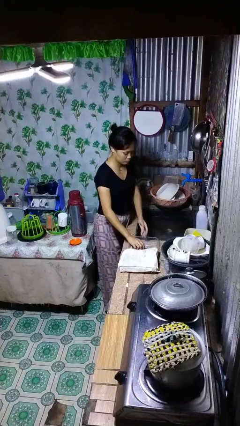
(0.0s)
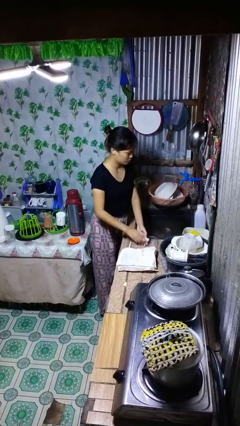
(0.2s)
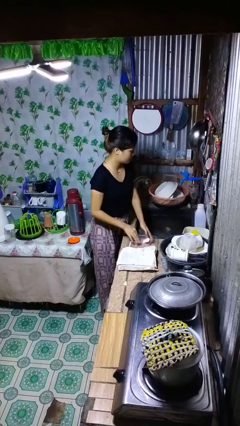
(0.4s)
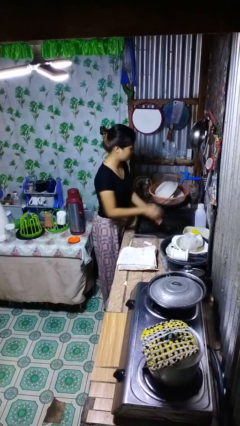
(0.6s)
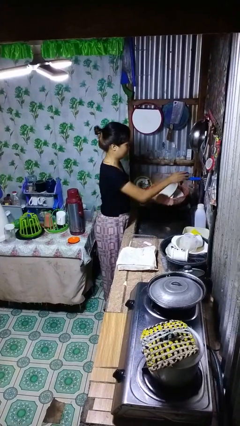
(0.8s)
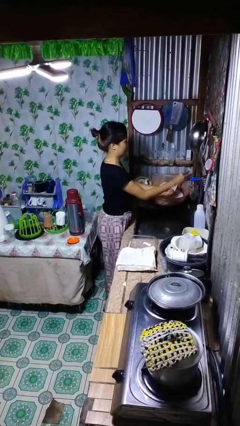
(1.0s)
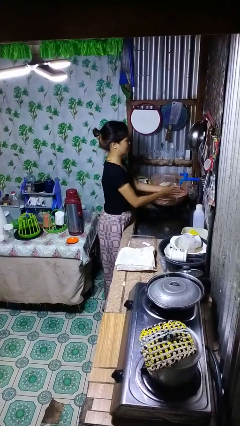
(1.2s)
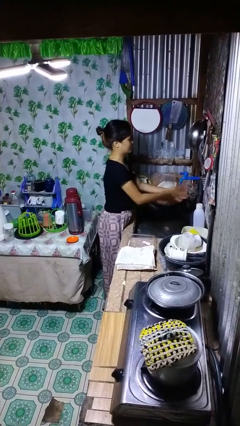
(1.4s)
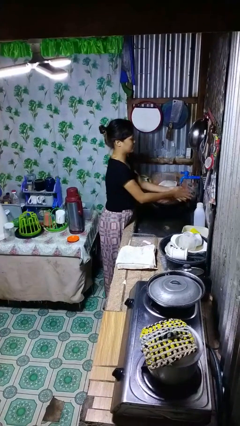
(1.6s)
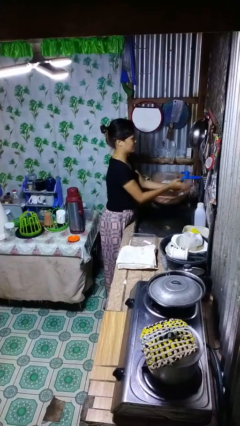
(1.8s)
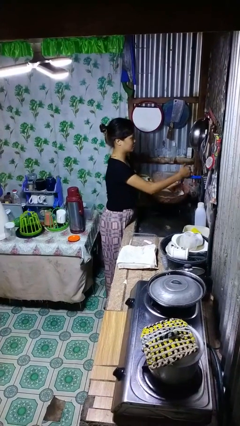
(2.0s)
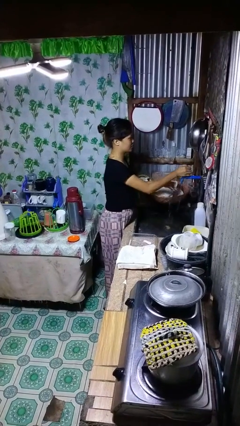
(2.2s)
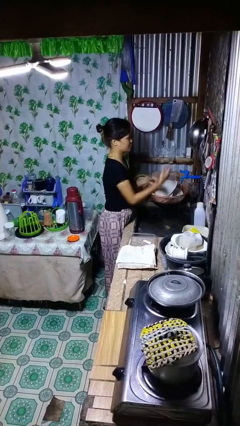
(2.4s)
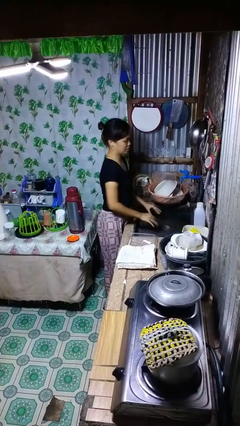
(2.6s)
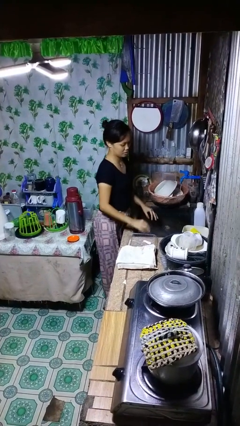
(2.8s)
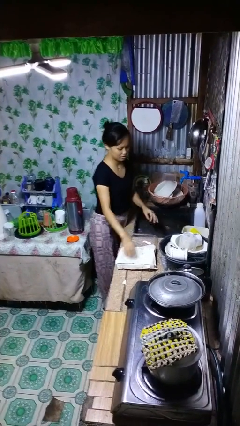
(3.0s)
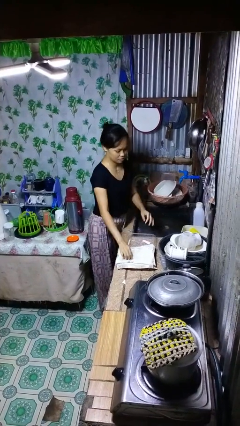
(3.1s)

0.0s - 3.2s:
person washes hands

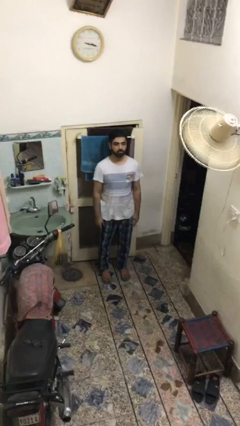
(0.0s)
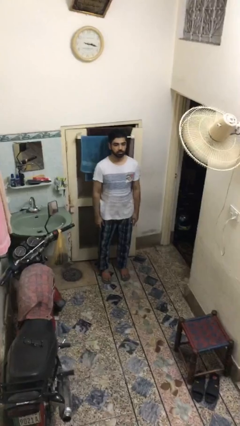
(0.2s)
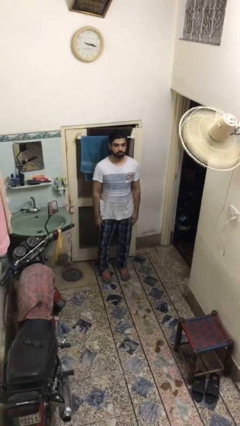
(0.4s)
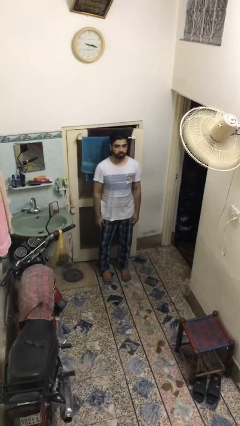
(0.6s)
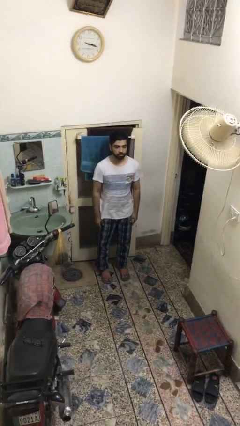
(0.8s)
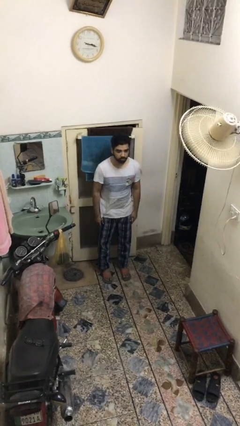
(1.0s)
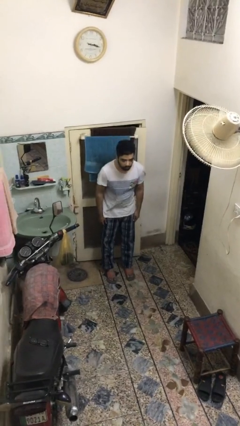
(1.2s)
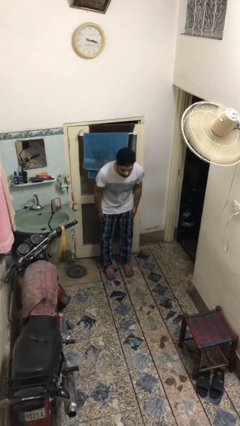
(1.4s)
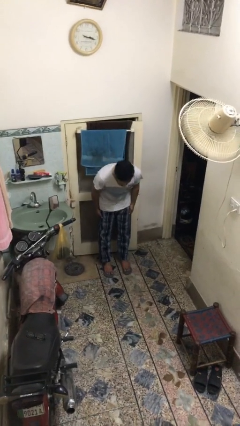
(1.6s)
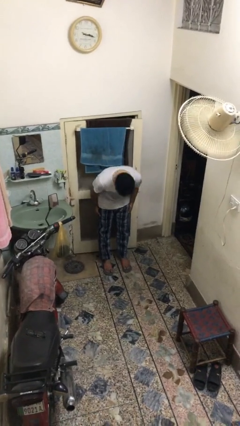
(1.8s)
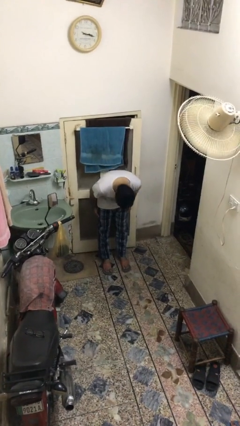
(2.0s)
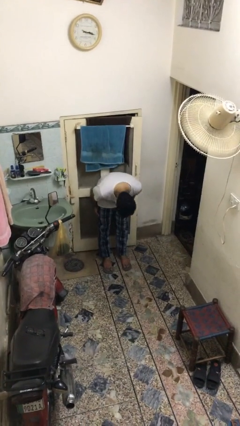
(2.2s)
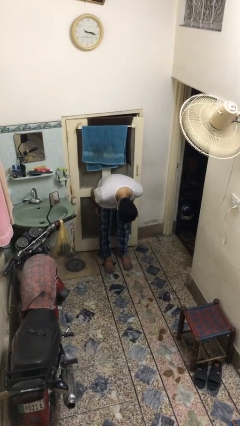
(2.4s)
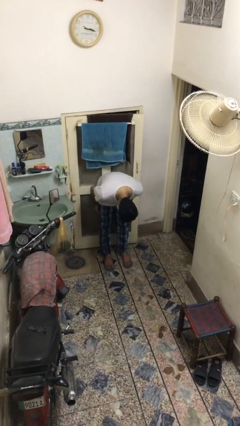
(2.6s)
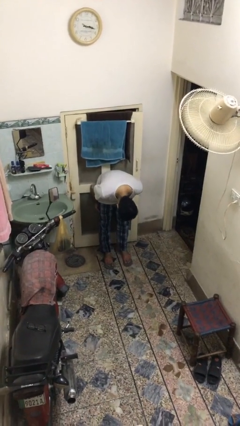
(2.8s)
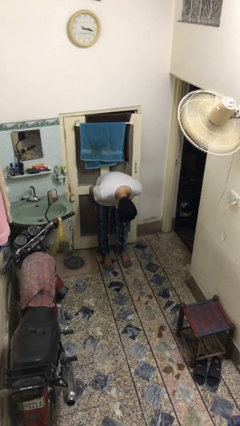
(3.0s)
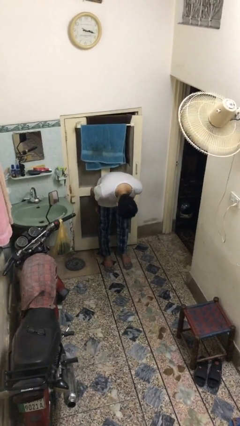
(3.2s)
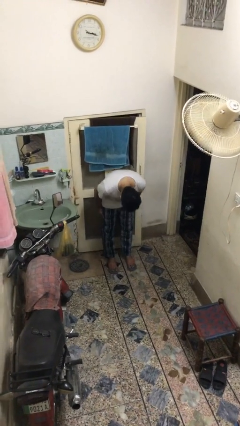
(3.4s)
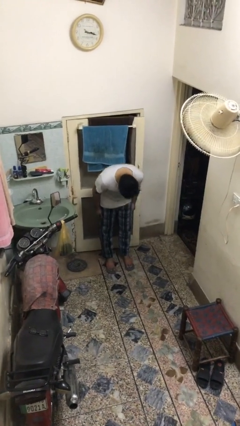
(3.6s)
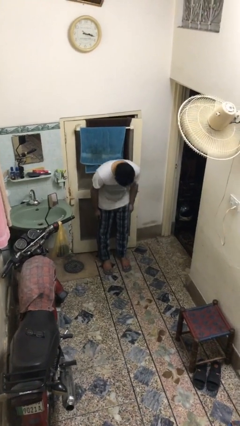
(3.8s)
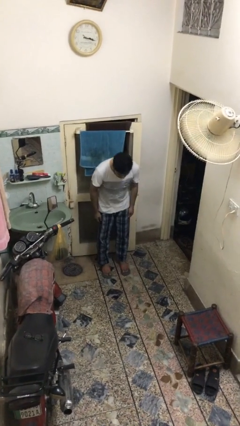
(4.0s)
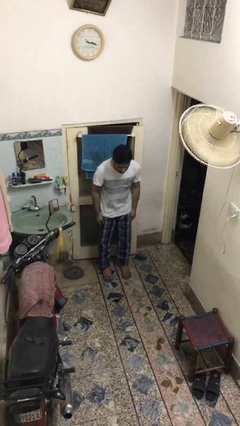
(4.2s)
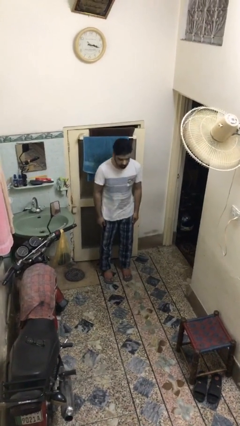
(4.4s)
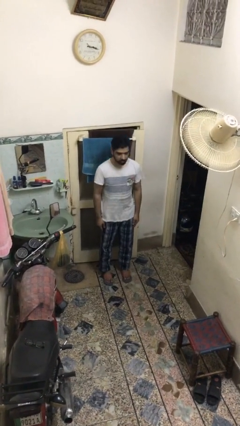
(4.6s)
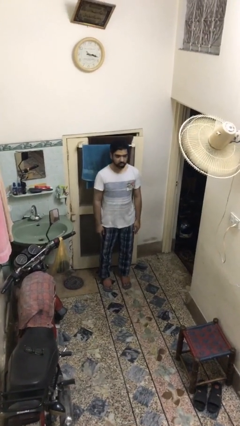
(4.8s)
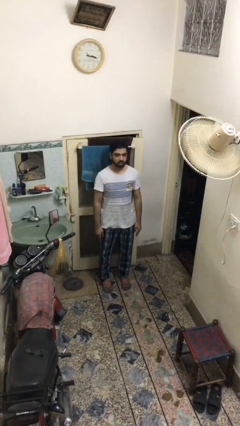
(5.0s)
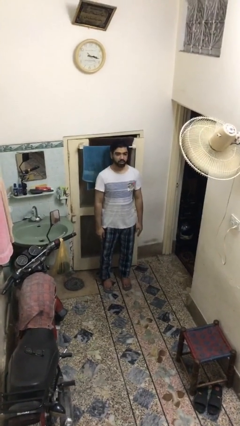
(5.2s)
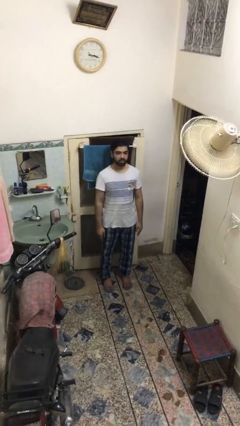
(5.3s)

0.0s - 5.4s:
person bows

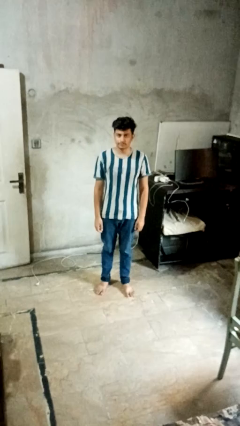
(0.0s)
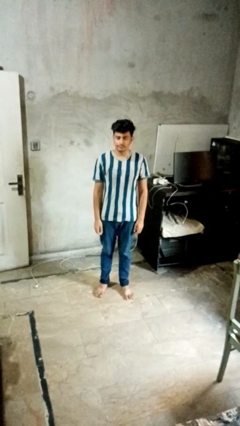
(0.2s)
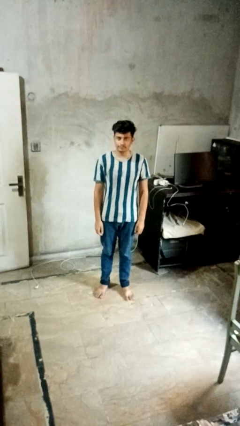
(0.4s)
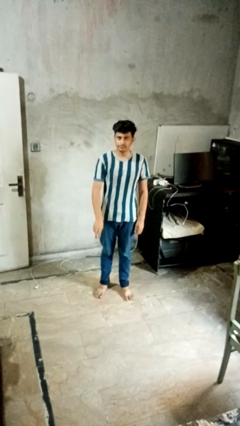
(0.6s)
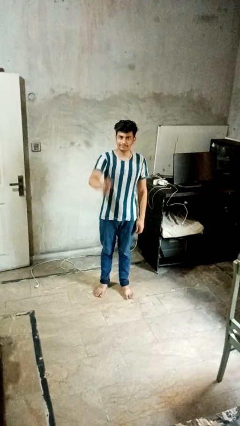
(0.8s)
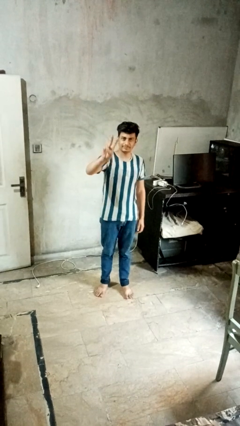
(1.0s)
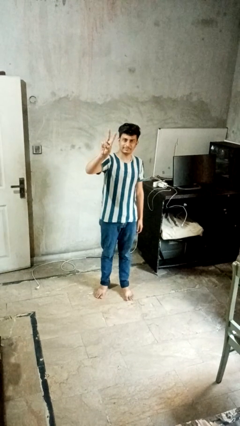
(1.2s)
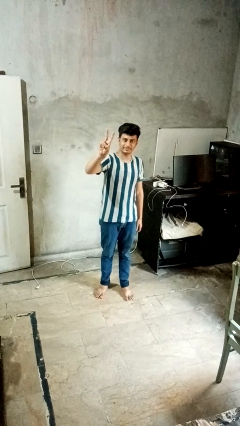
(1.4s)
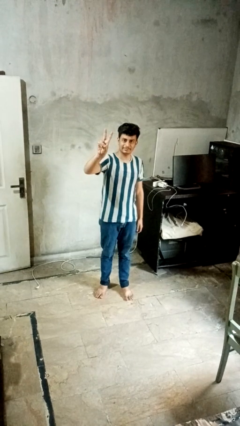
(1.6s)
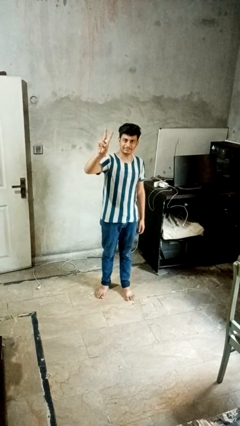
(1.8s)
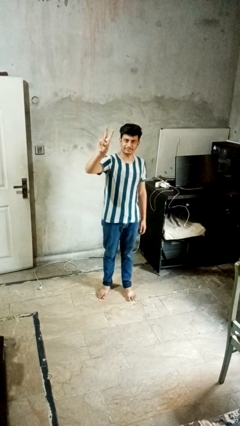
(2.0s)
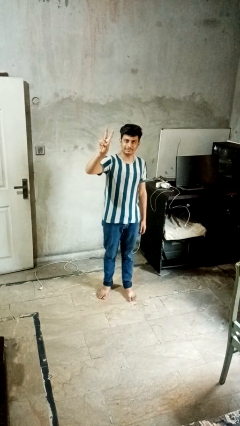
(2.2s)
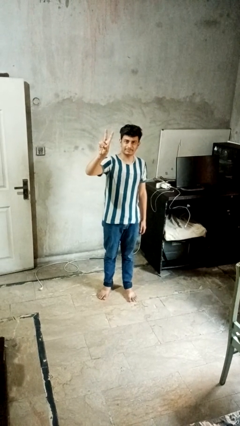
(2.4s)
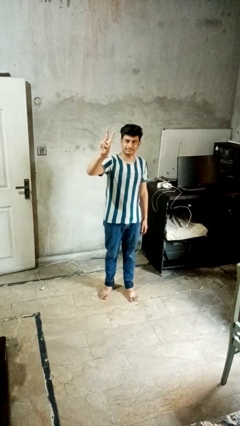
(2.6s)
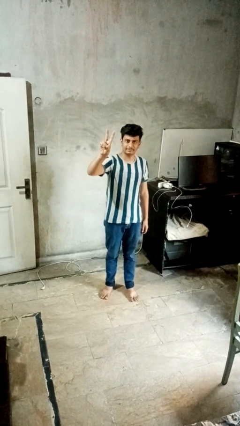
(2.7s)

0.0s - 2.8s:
person gestures peace

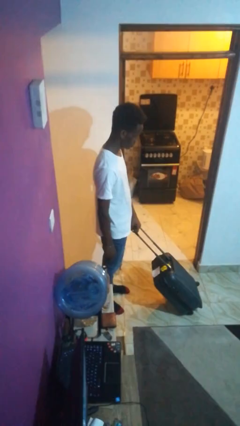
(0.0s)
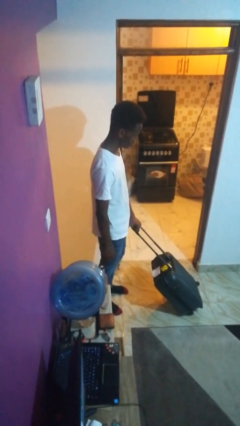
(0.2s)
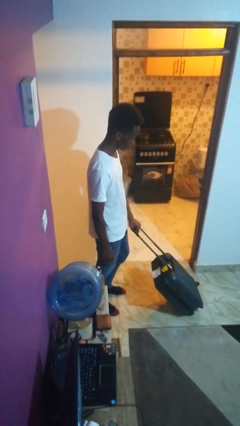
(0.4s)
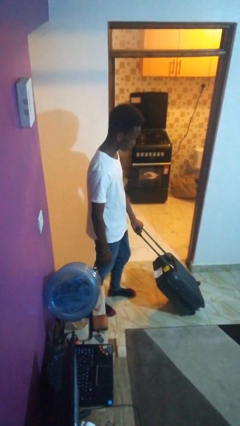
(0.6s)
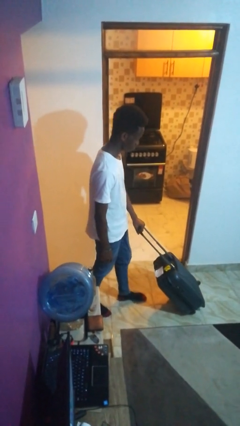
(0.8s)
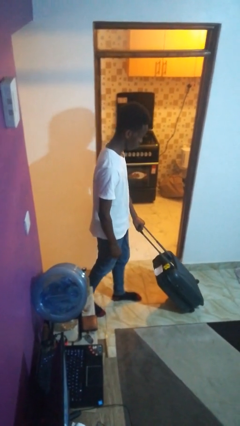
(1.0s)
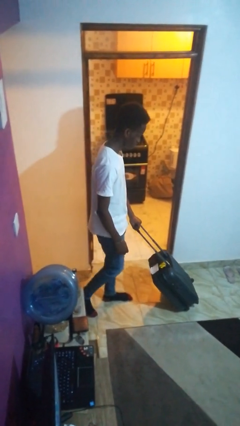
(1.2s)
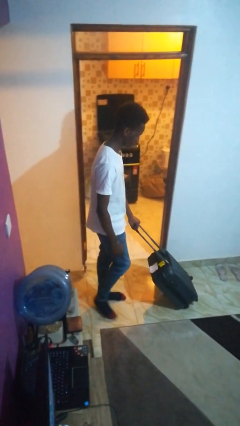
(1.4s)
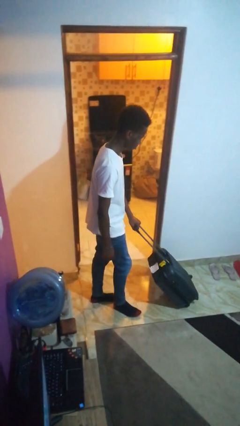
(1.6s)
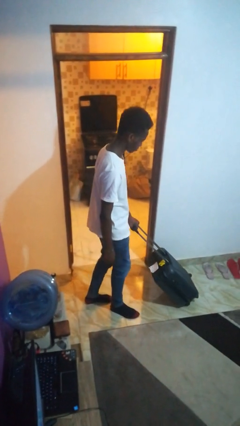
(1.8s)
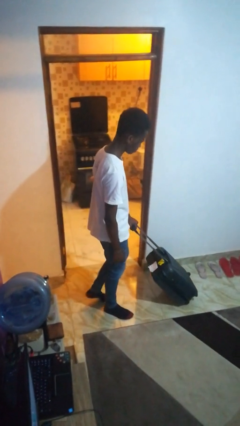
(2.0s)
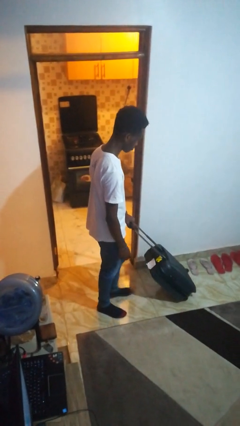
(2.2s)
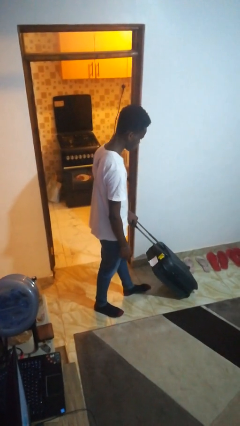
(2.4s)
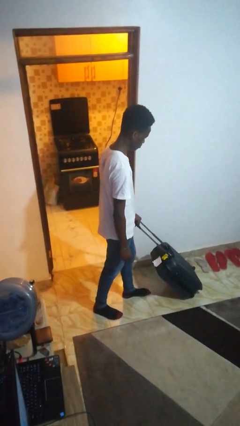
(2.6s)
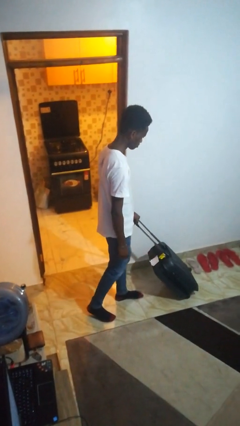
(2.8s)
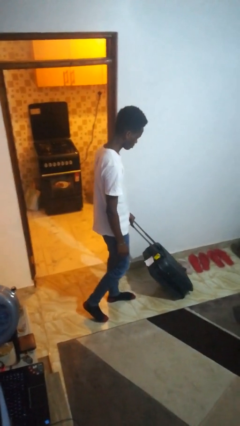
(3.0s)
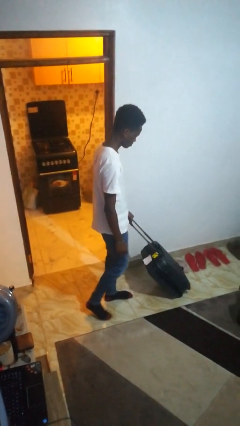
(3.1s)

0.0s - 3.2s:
person pushes wheeled cart

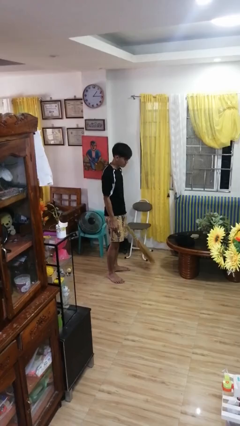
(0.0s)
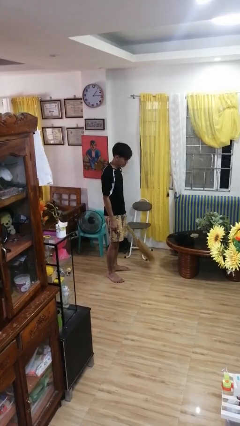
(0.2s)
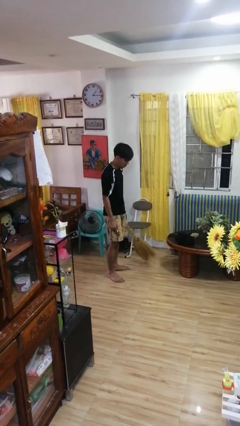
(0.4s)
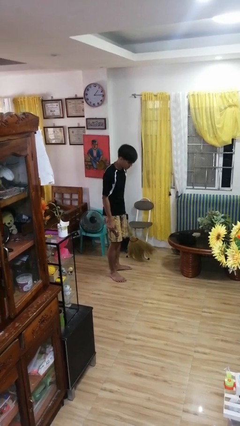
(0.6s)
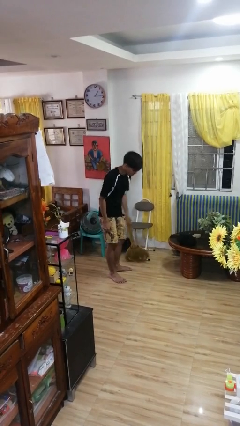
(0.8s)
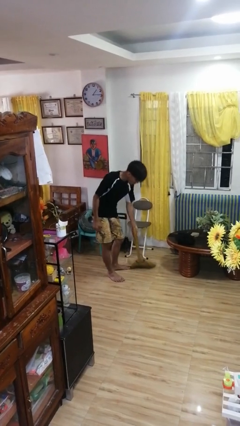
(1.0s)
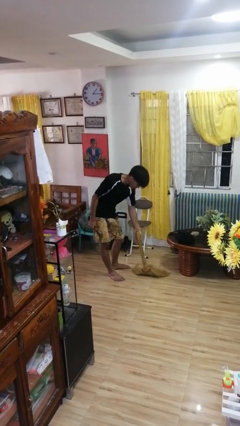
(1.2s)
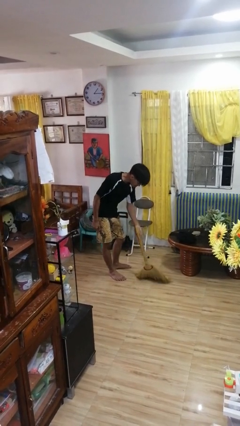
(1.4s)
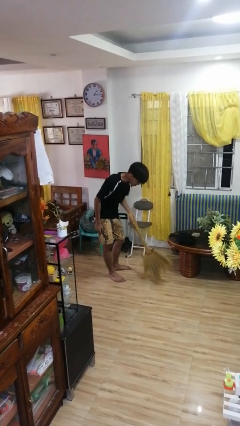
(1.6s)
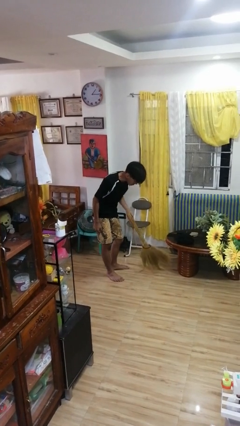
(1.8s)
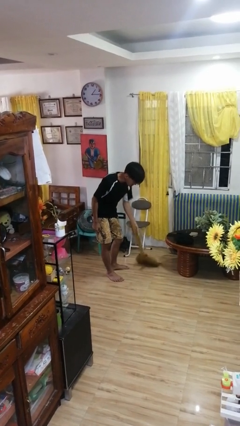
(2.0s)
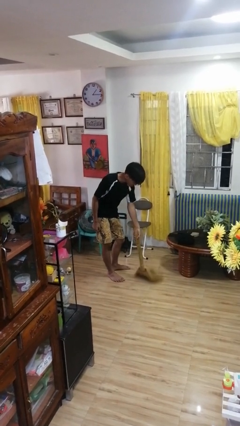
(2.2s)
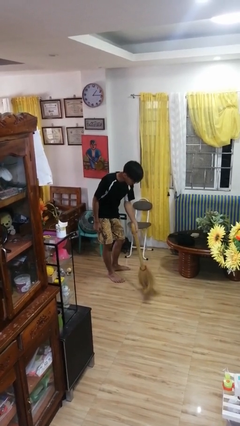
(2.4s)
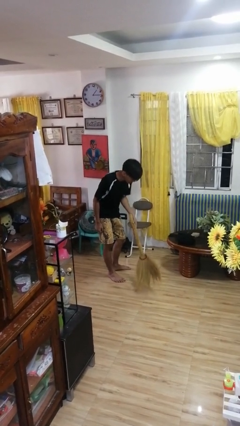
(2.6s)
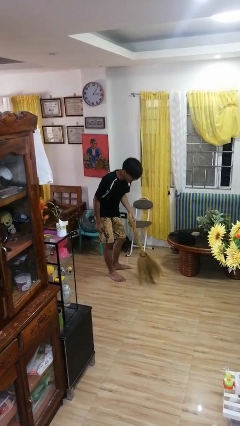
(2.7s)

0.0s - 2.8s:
person sweeps floor
